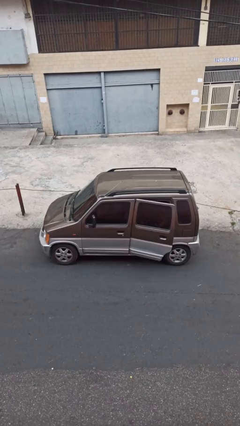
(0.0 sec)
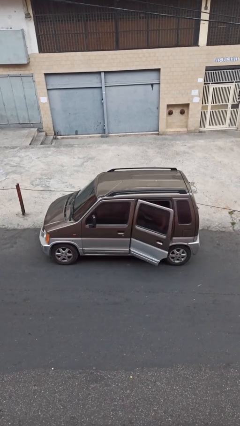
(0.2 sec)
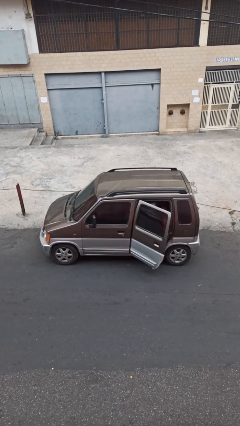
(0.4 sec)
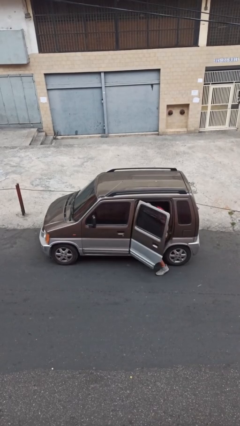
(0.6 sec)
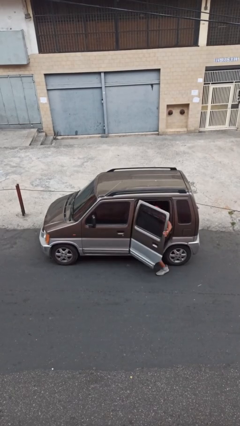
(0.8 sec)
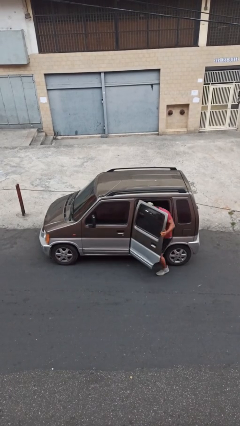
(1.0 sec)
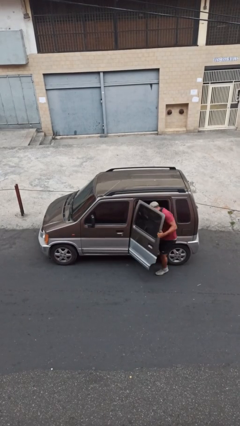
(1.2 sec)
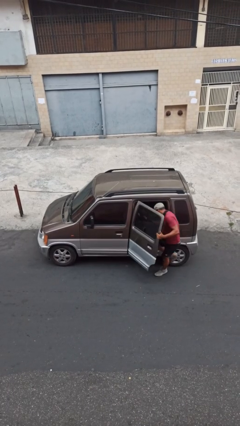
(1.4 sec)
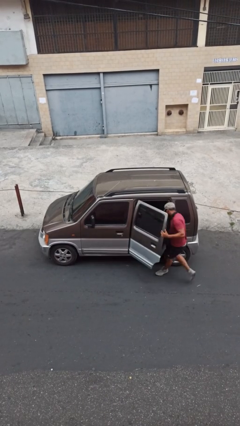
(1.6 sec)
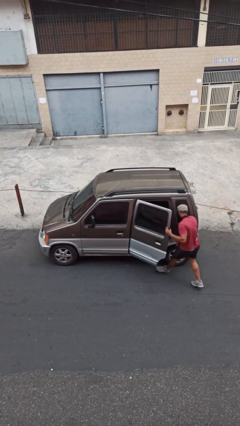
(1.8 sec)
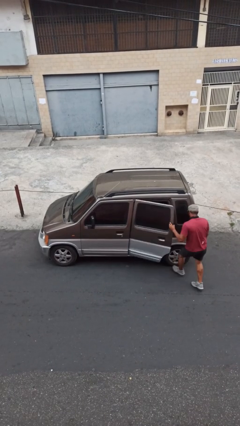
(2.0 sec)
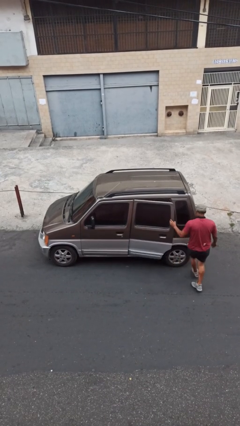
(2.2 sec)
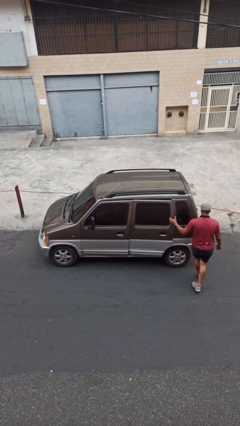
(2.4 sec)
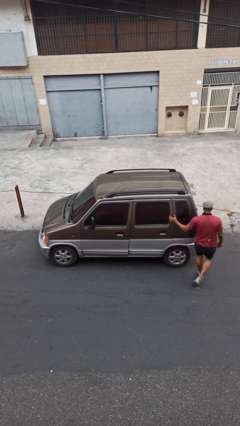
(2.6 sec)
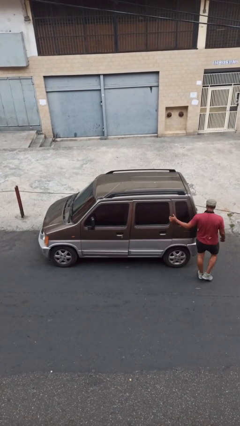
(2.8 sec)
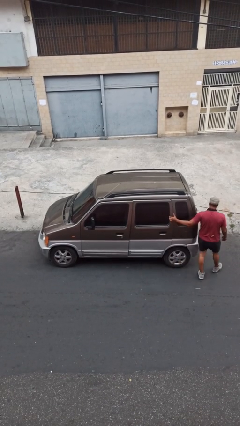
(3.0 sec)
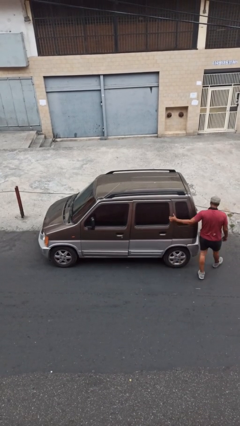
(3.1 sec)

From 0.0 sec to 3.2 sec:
car drops off person

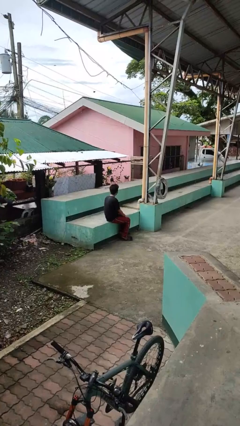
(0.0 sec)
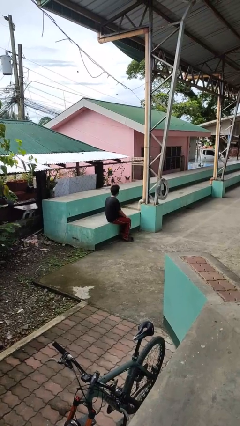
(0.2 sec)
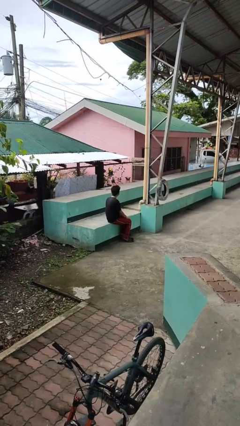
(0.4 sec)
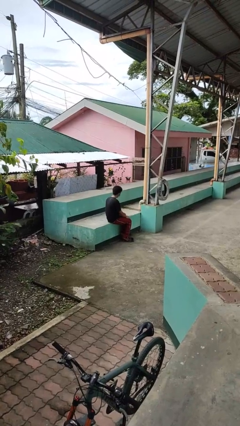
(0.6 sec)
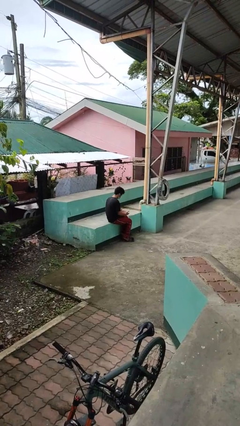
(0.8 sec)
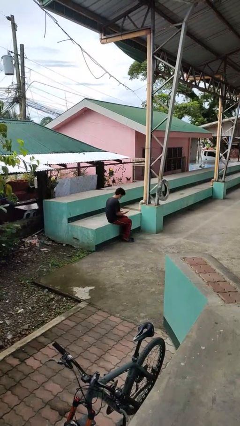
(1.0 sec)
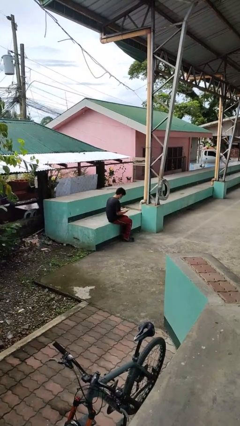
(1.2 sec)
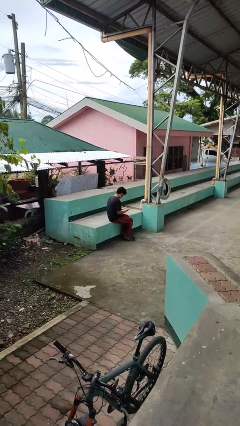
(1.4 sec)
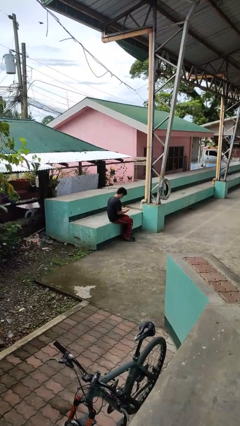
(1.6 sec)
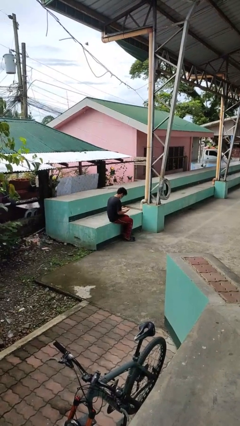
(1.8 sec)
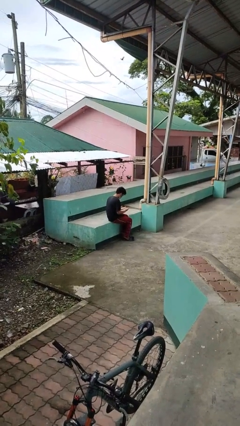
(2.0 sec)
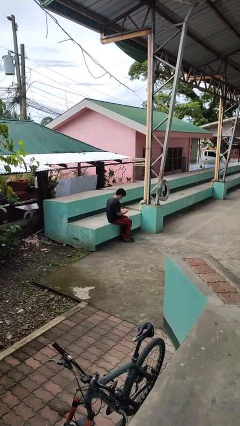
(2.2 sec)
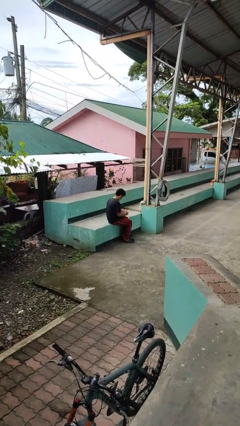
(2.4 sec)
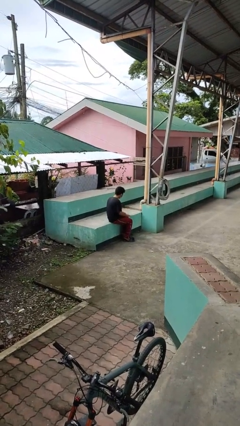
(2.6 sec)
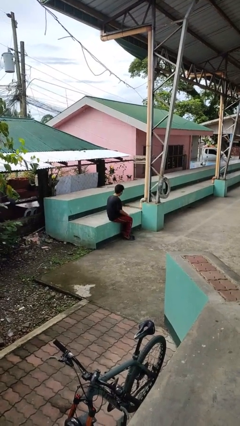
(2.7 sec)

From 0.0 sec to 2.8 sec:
person looks at hands in lap

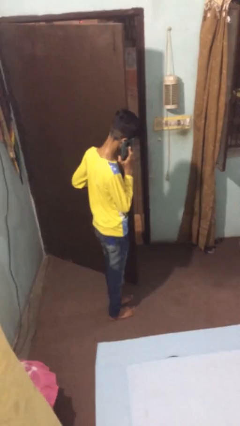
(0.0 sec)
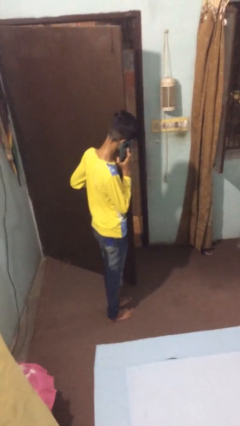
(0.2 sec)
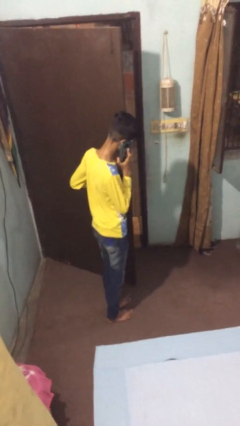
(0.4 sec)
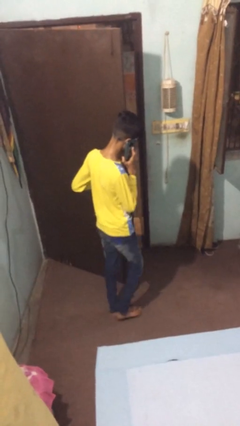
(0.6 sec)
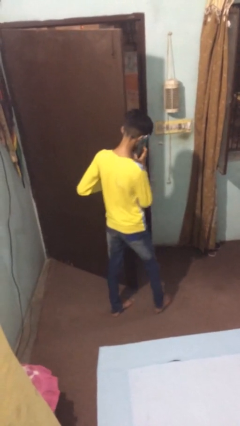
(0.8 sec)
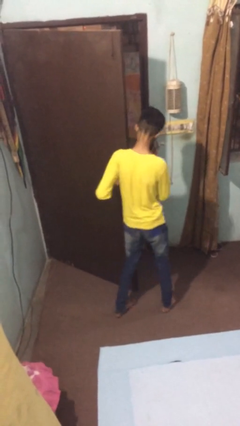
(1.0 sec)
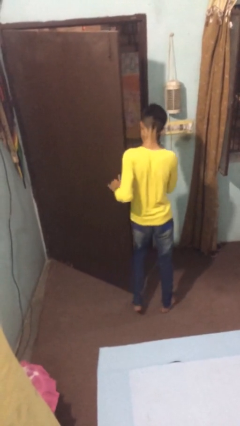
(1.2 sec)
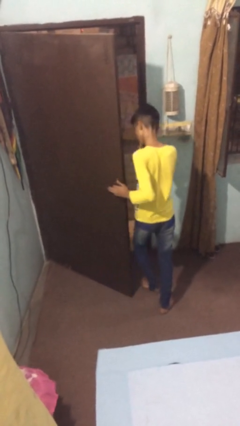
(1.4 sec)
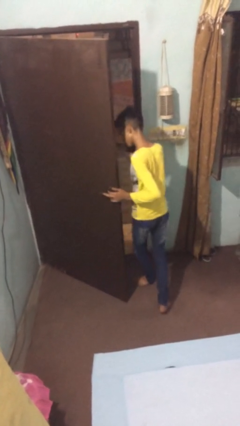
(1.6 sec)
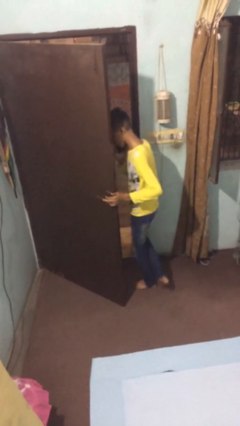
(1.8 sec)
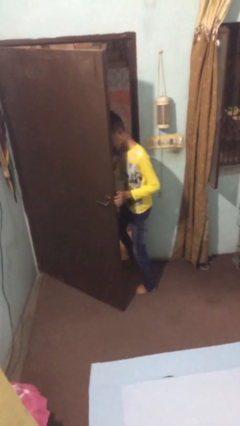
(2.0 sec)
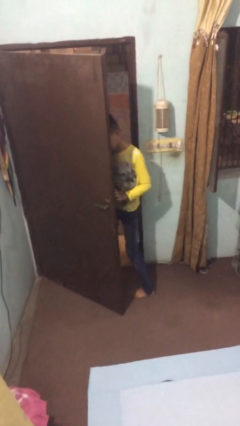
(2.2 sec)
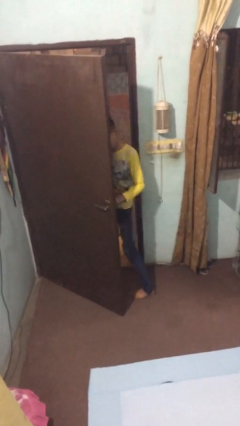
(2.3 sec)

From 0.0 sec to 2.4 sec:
person exits scene through structure

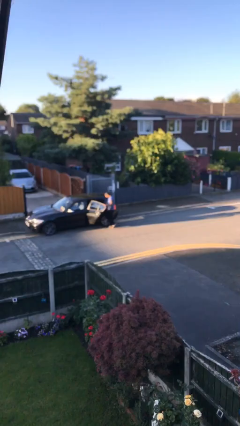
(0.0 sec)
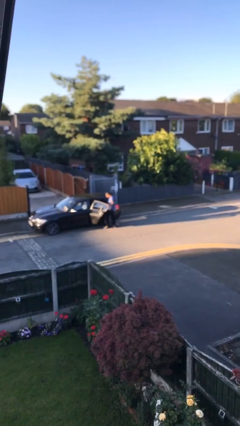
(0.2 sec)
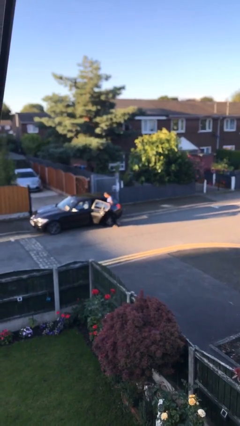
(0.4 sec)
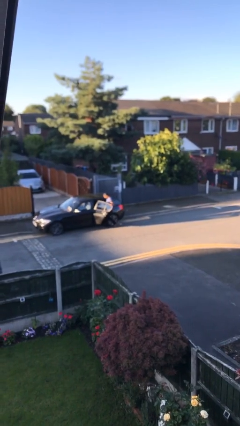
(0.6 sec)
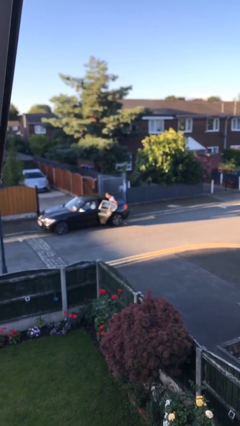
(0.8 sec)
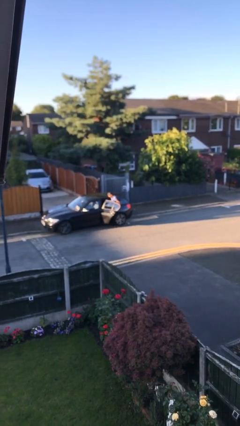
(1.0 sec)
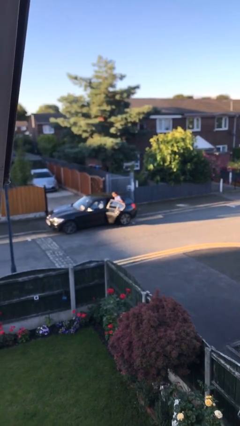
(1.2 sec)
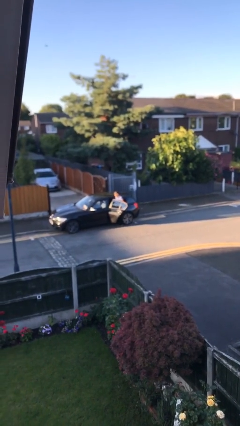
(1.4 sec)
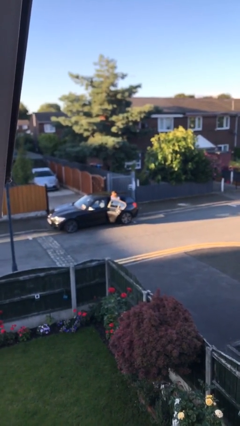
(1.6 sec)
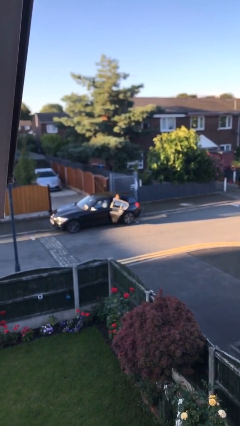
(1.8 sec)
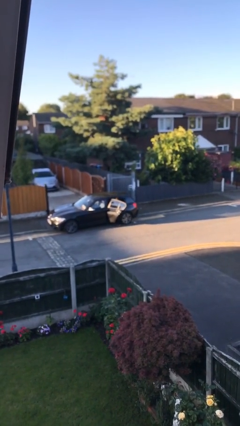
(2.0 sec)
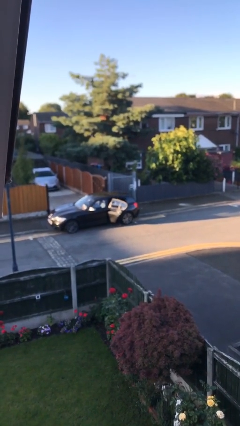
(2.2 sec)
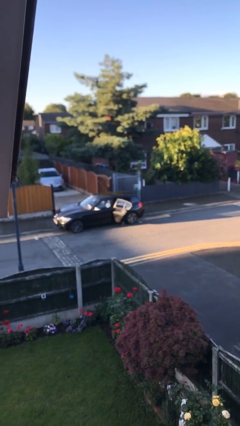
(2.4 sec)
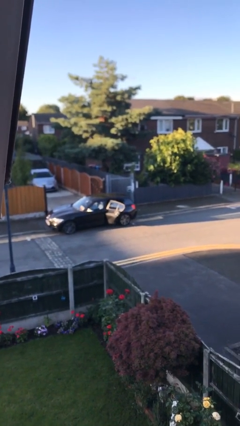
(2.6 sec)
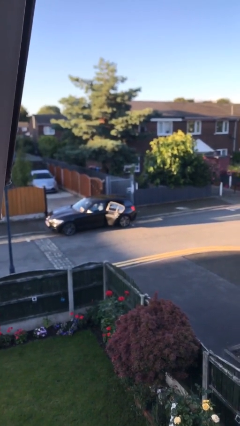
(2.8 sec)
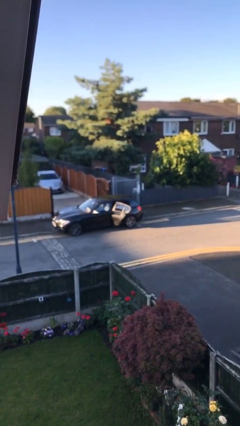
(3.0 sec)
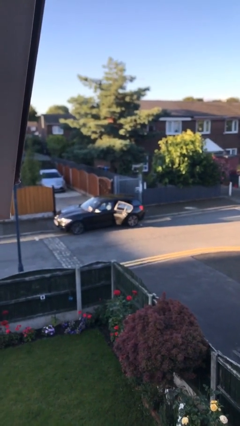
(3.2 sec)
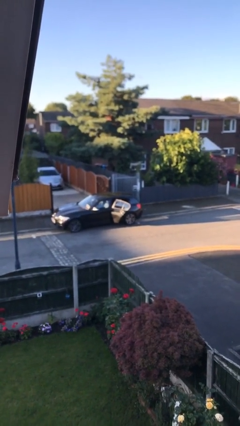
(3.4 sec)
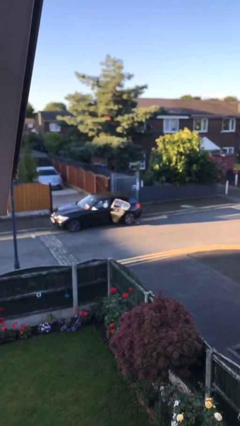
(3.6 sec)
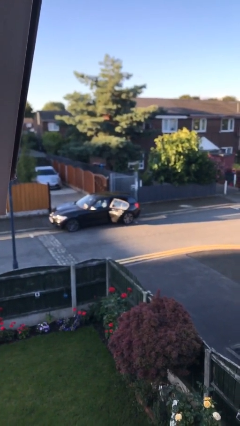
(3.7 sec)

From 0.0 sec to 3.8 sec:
person enters car

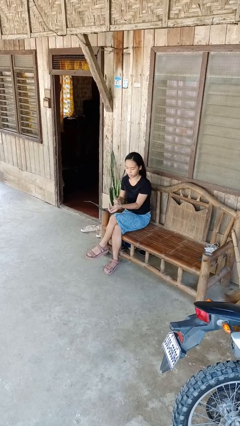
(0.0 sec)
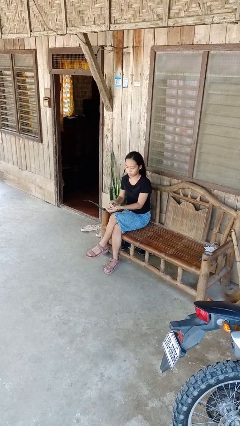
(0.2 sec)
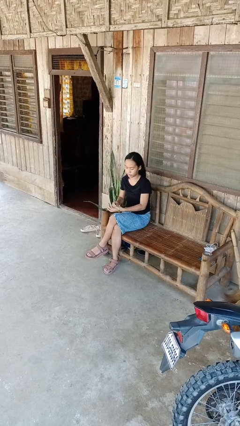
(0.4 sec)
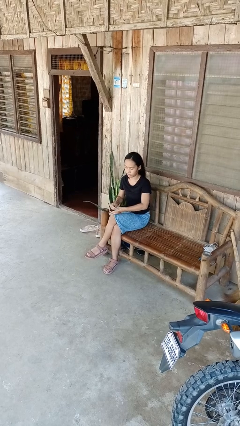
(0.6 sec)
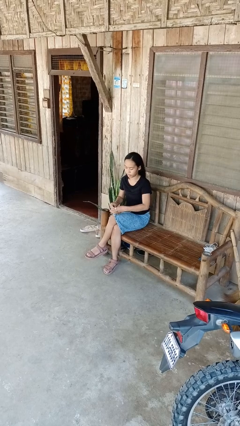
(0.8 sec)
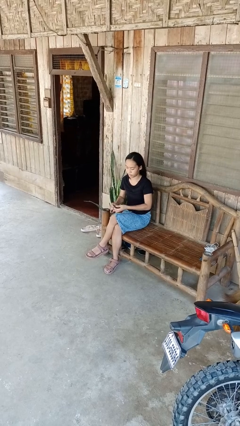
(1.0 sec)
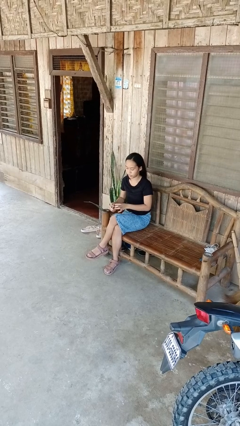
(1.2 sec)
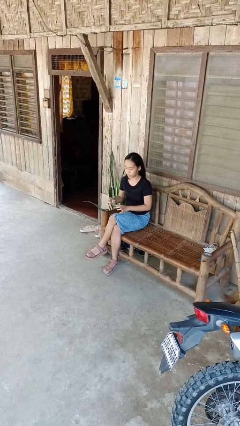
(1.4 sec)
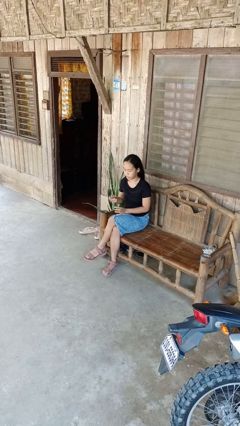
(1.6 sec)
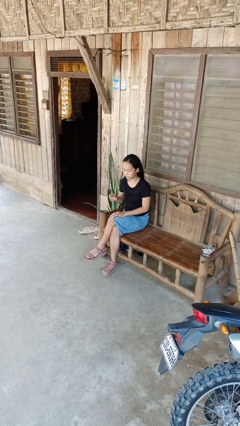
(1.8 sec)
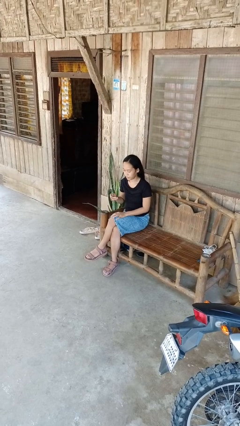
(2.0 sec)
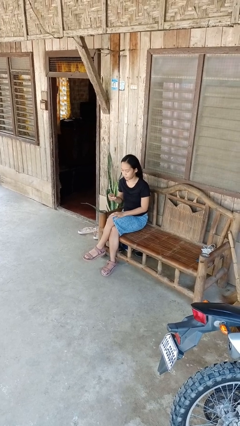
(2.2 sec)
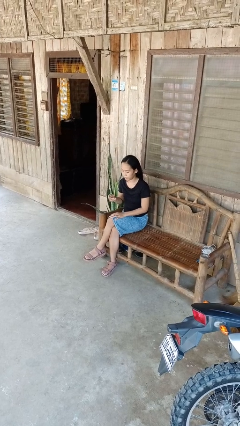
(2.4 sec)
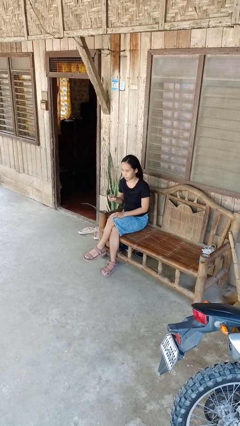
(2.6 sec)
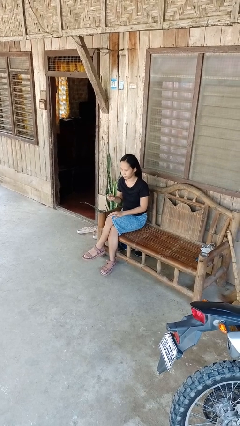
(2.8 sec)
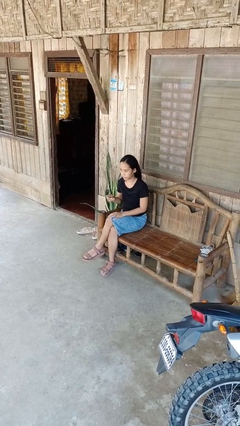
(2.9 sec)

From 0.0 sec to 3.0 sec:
person takes off wristwatch

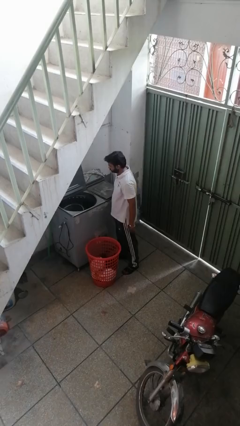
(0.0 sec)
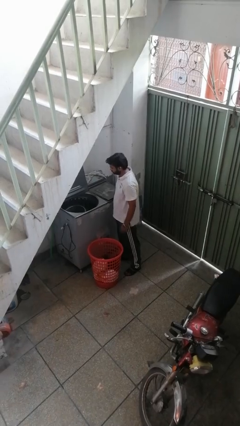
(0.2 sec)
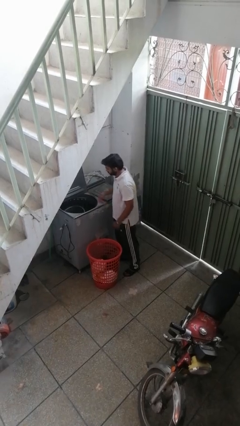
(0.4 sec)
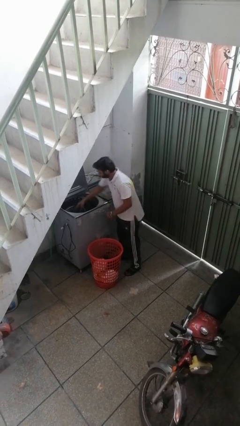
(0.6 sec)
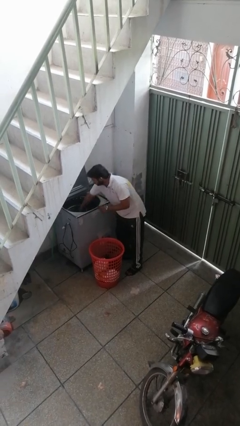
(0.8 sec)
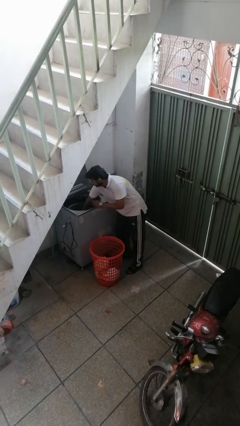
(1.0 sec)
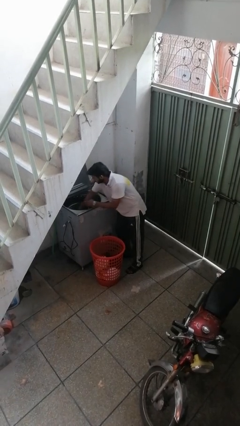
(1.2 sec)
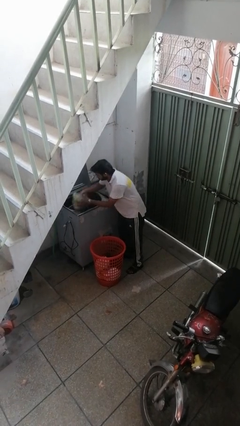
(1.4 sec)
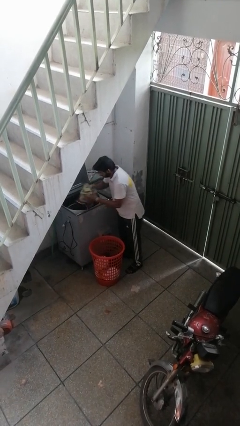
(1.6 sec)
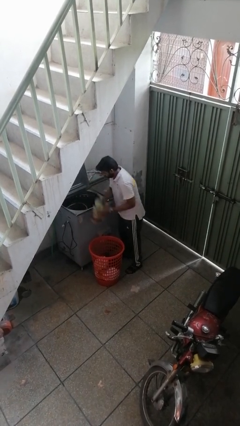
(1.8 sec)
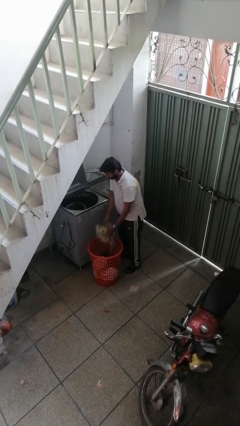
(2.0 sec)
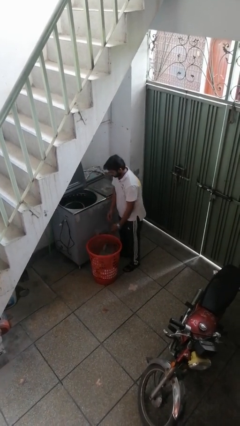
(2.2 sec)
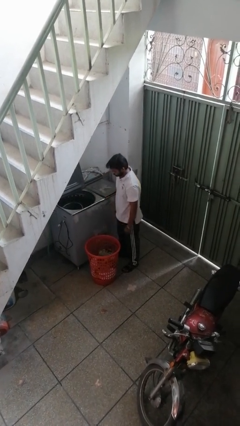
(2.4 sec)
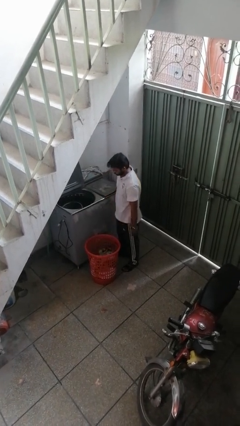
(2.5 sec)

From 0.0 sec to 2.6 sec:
person loads clotheswasher
